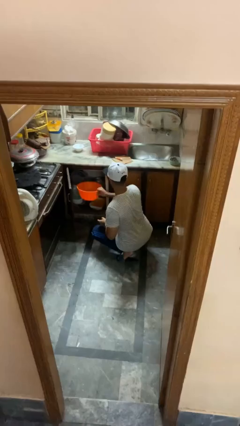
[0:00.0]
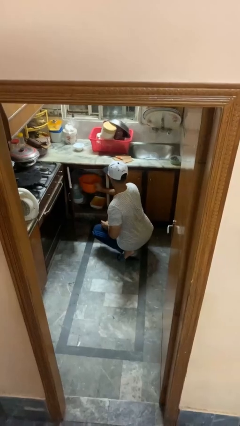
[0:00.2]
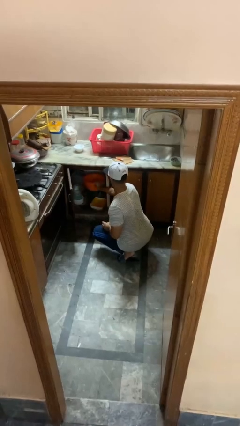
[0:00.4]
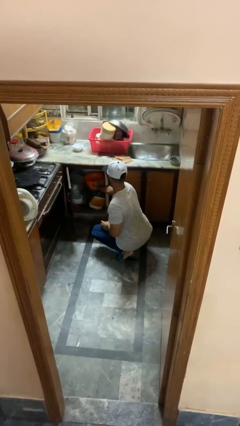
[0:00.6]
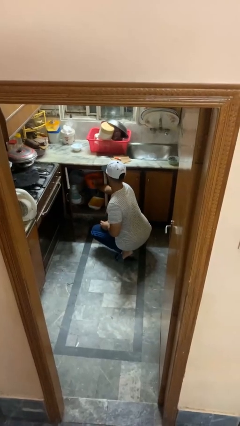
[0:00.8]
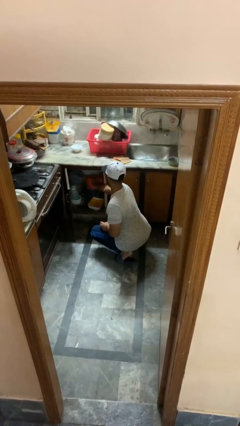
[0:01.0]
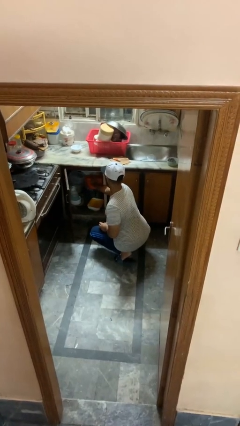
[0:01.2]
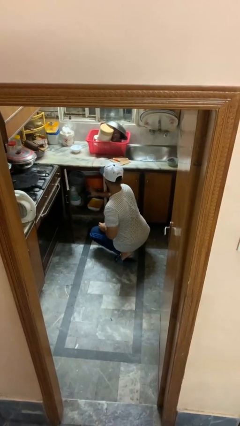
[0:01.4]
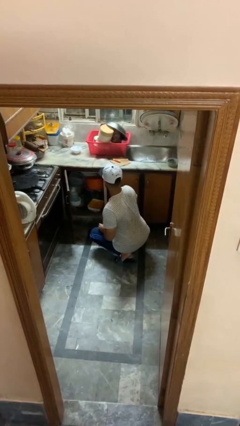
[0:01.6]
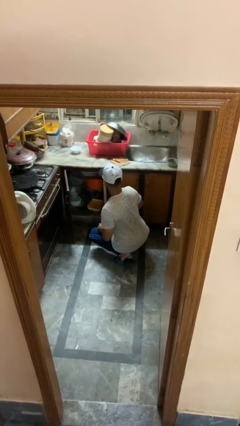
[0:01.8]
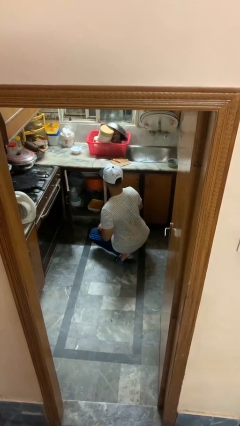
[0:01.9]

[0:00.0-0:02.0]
person puts object into kitchen drawer

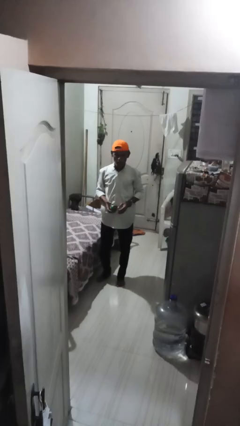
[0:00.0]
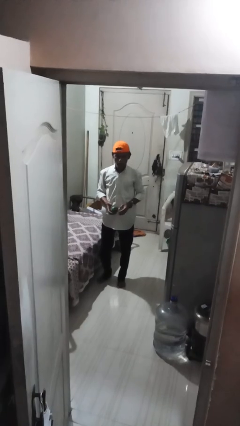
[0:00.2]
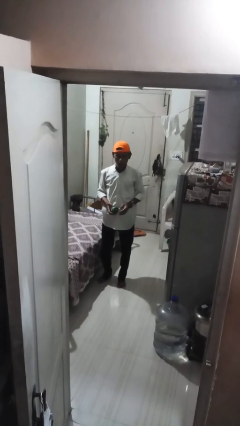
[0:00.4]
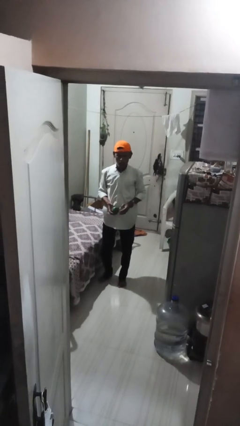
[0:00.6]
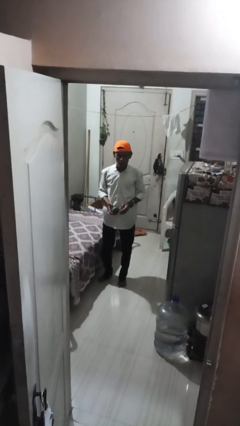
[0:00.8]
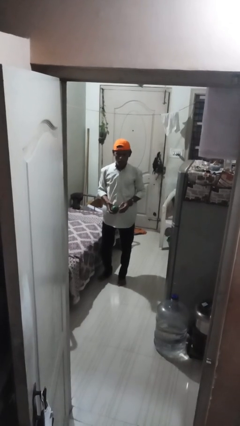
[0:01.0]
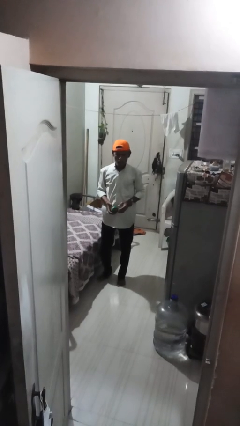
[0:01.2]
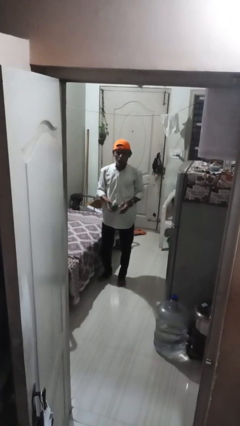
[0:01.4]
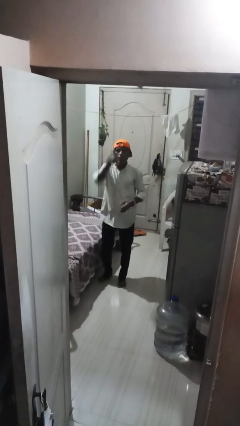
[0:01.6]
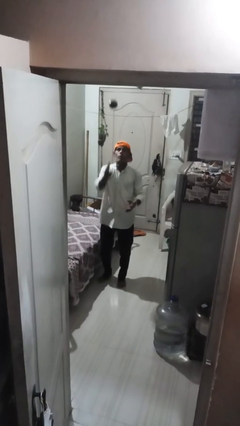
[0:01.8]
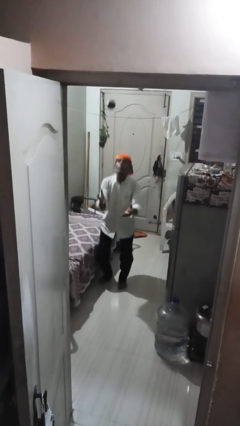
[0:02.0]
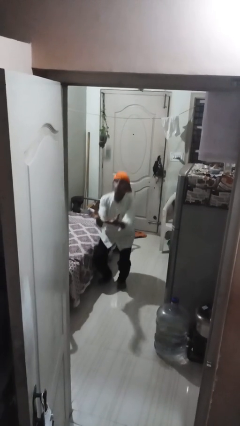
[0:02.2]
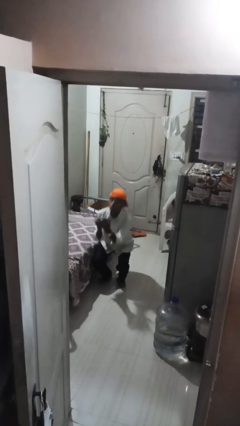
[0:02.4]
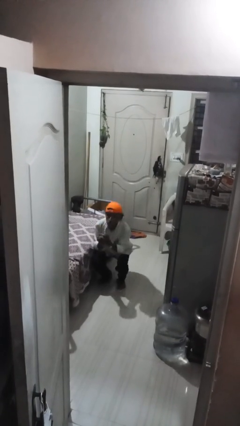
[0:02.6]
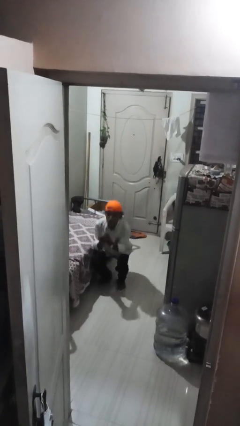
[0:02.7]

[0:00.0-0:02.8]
person drops object

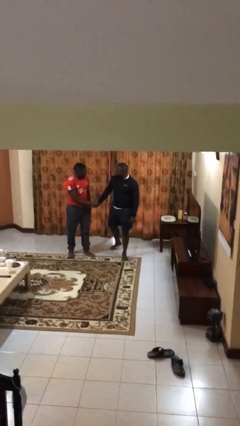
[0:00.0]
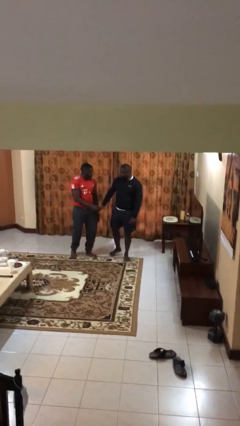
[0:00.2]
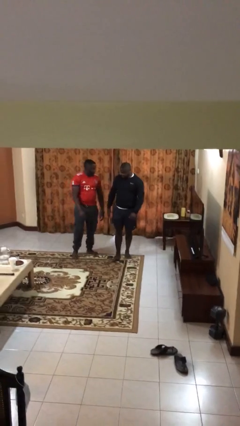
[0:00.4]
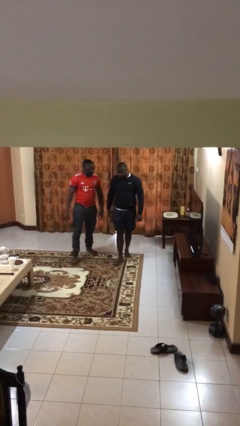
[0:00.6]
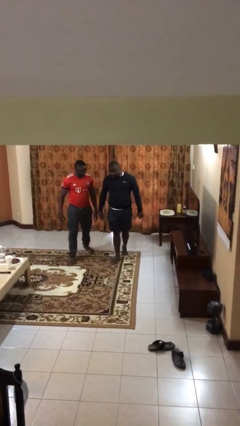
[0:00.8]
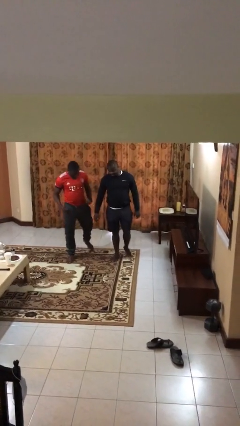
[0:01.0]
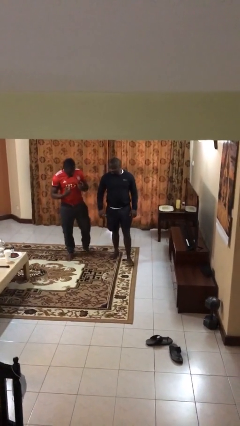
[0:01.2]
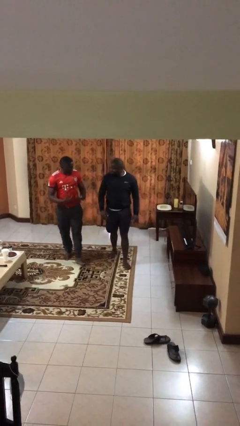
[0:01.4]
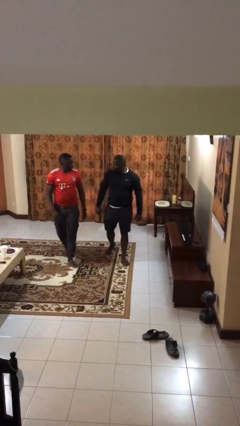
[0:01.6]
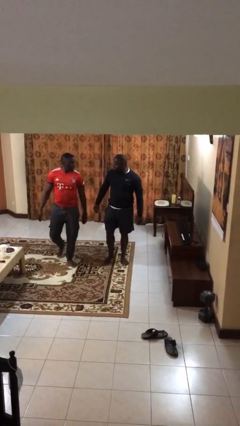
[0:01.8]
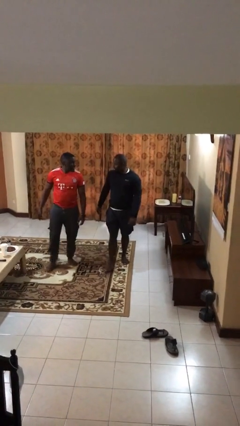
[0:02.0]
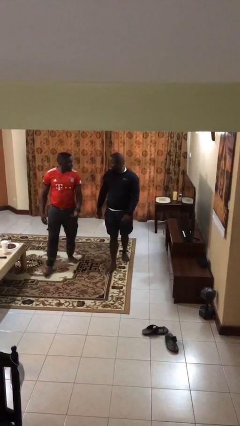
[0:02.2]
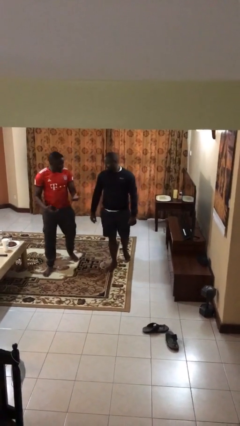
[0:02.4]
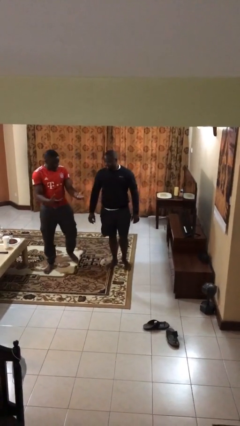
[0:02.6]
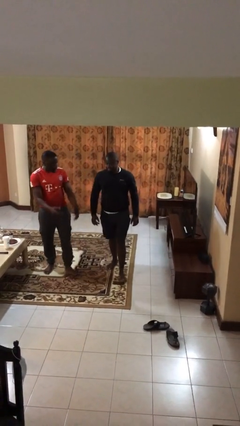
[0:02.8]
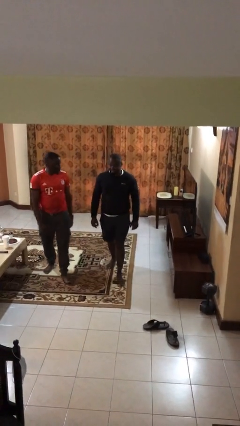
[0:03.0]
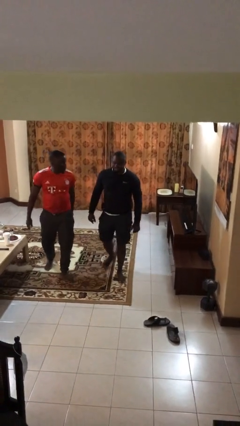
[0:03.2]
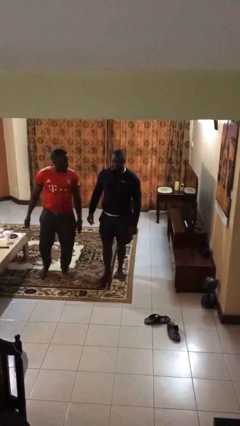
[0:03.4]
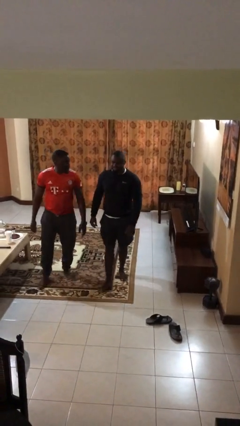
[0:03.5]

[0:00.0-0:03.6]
person talks to person

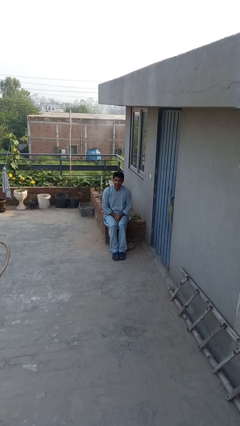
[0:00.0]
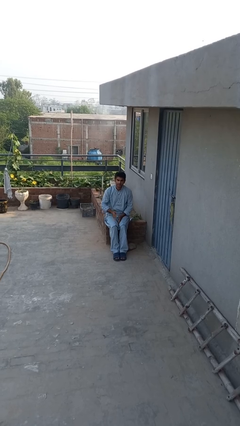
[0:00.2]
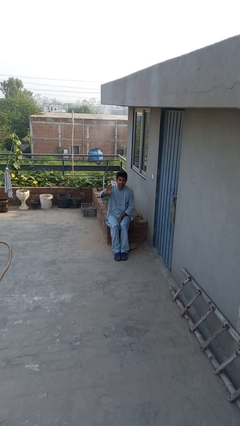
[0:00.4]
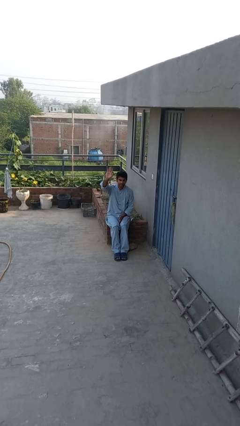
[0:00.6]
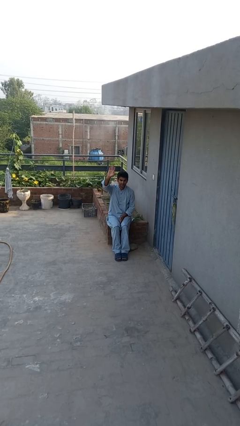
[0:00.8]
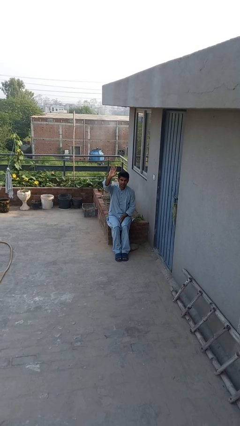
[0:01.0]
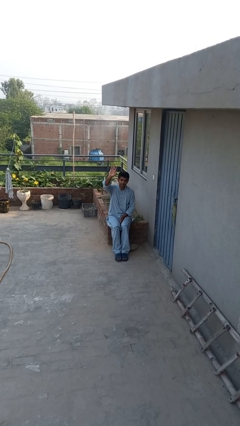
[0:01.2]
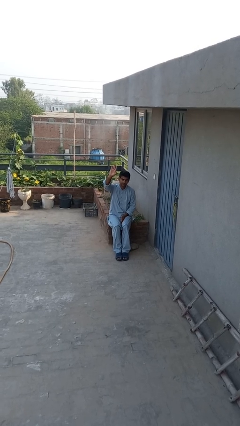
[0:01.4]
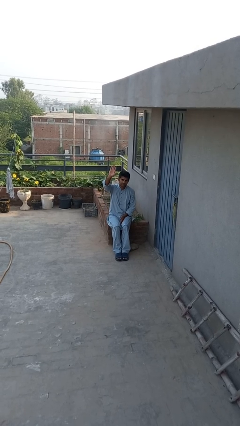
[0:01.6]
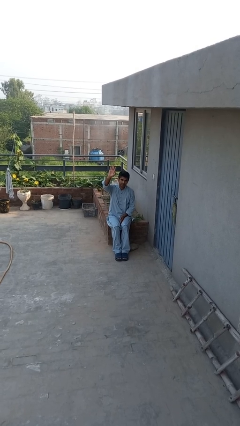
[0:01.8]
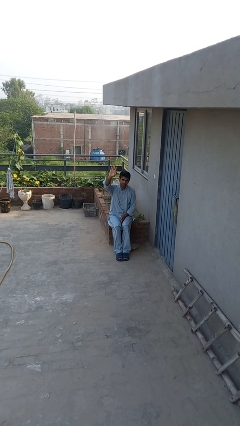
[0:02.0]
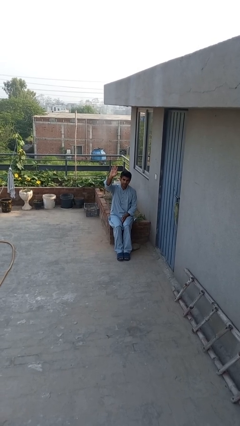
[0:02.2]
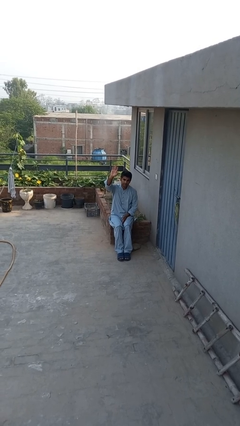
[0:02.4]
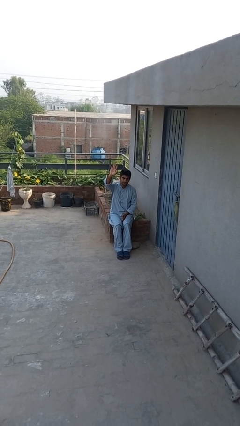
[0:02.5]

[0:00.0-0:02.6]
person gestures raise hand

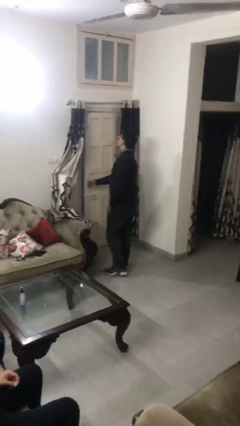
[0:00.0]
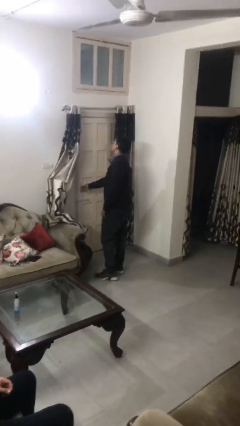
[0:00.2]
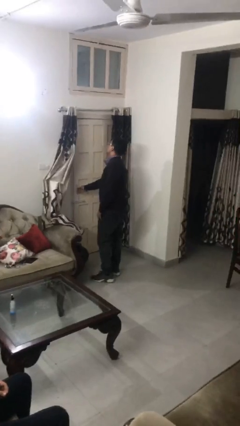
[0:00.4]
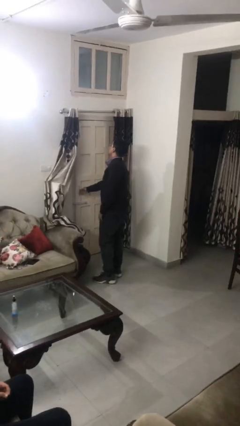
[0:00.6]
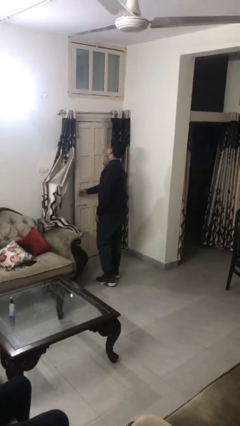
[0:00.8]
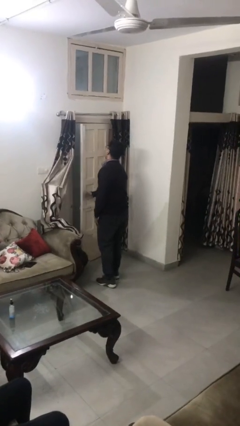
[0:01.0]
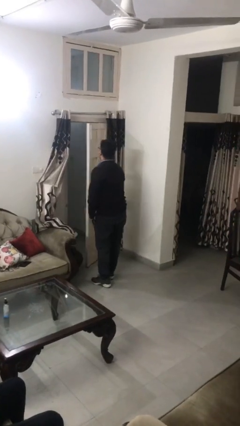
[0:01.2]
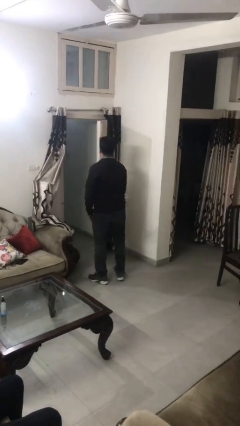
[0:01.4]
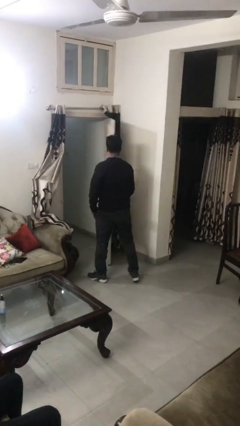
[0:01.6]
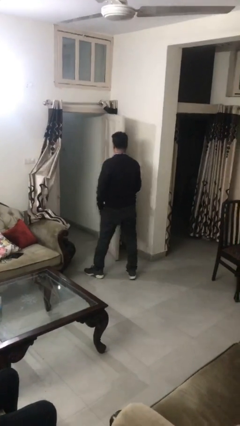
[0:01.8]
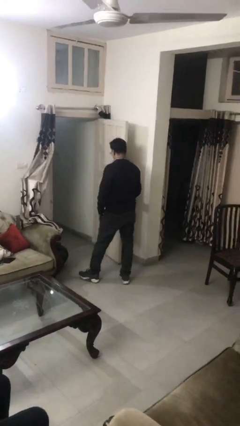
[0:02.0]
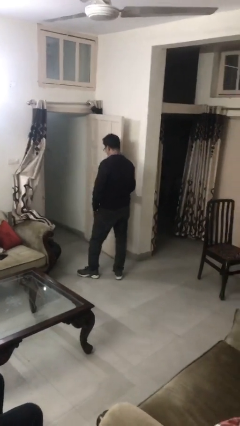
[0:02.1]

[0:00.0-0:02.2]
person opens facility door

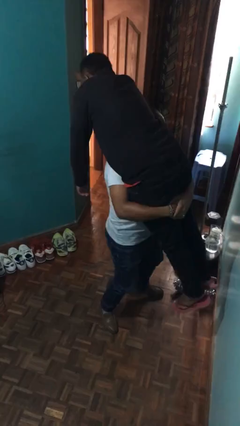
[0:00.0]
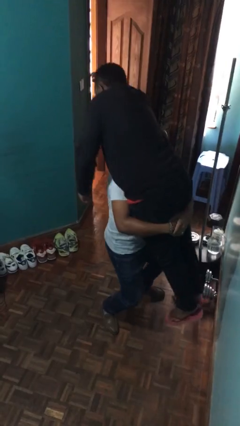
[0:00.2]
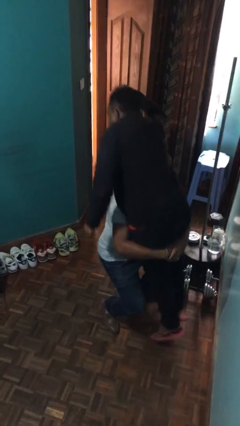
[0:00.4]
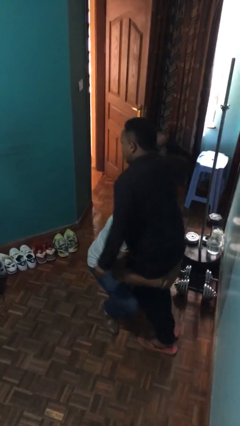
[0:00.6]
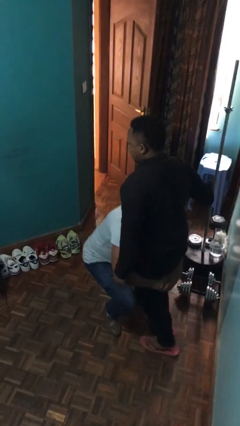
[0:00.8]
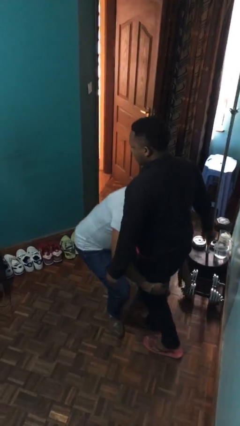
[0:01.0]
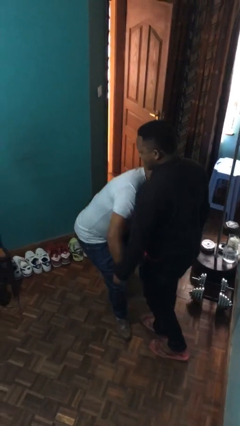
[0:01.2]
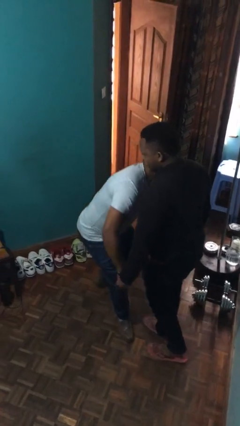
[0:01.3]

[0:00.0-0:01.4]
person puts down person

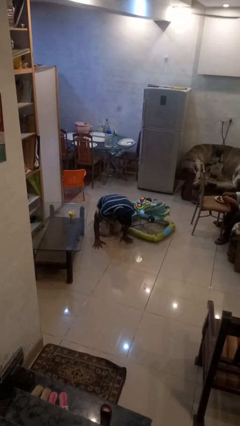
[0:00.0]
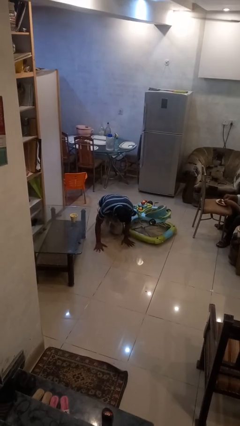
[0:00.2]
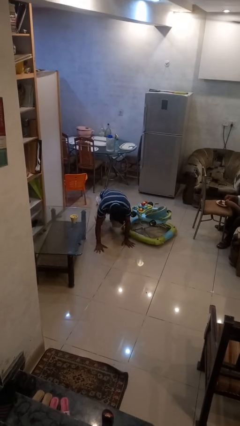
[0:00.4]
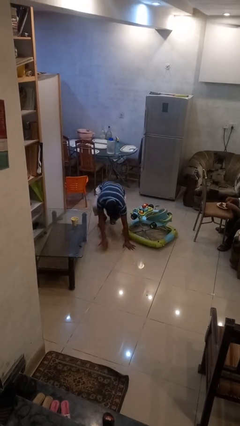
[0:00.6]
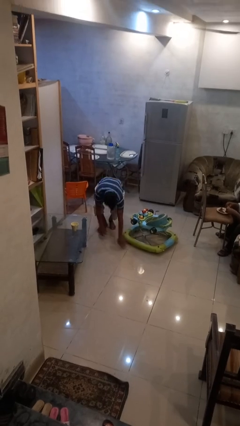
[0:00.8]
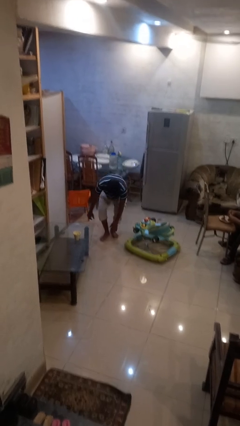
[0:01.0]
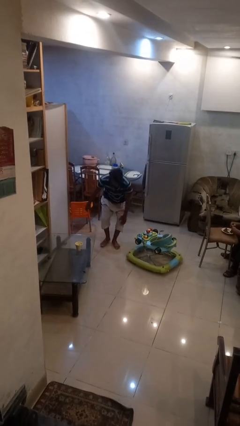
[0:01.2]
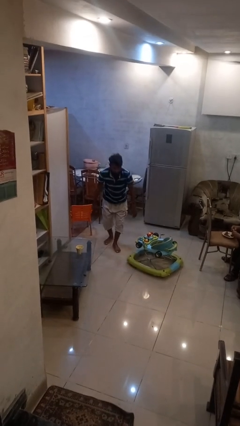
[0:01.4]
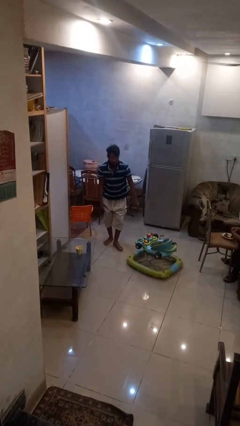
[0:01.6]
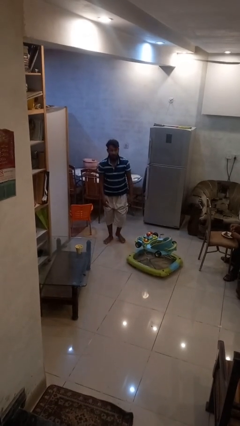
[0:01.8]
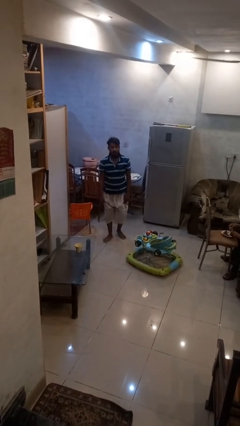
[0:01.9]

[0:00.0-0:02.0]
person stands up from floor

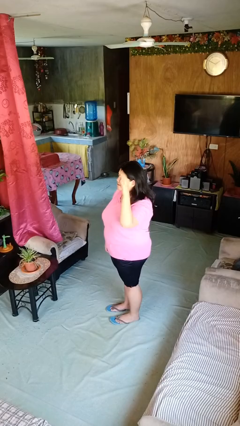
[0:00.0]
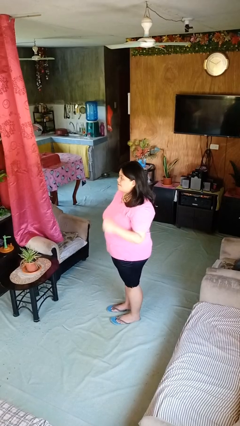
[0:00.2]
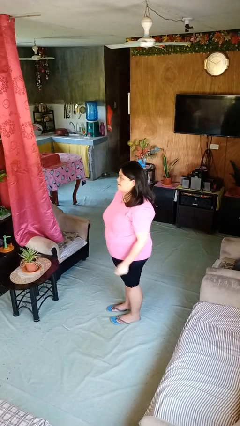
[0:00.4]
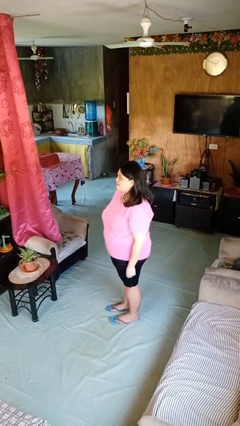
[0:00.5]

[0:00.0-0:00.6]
person gestures lower hand
